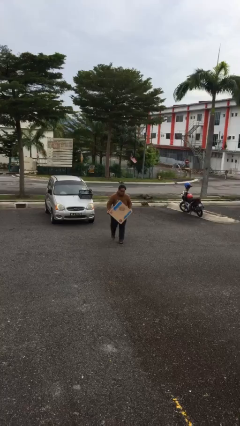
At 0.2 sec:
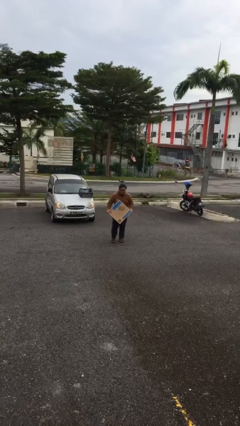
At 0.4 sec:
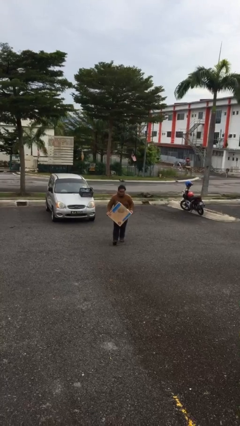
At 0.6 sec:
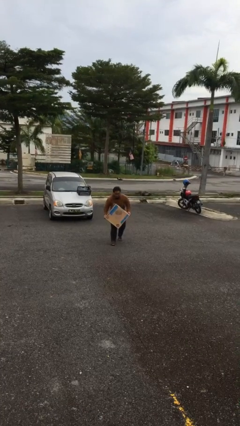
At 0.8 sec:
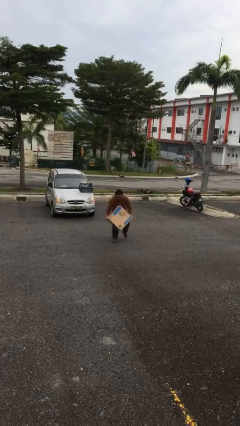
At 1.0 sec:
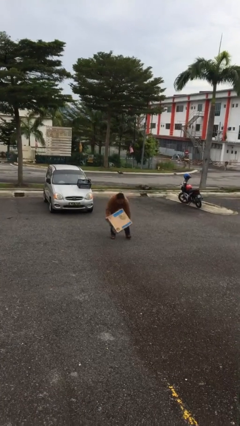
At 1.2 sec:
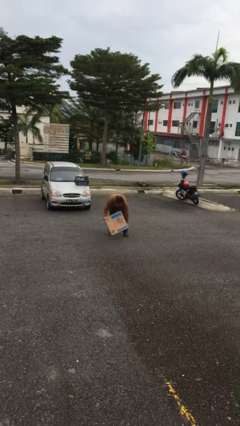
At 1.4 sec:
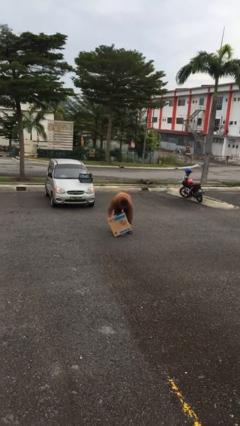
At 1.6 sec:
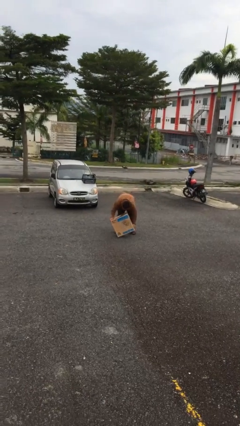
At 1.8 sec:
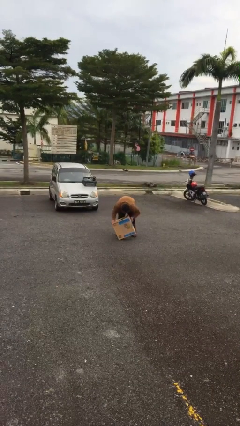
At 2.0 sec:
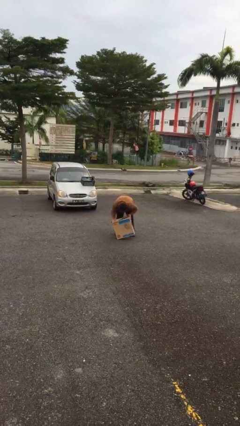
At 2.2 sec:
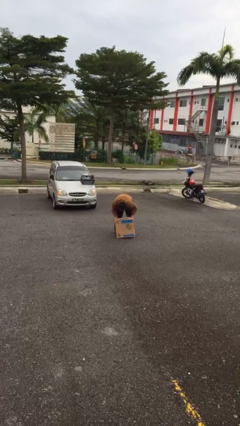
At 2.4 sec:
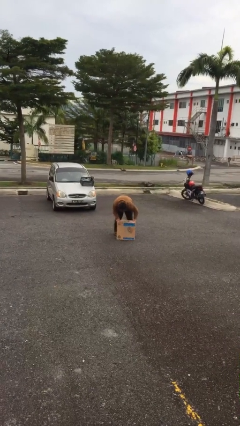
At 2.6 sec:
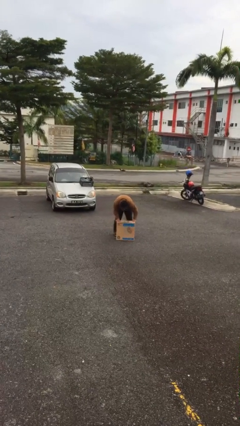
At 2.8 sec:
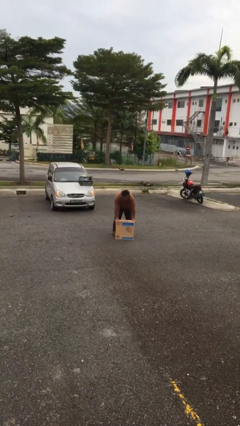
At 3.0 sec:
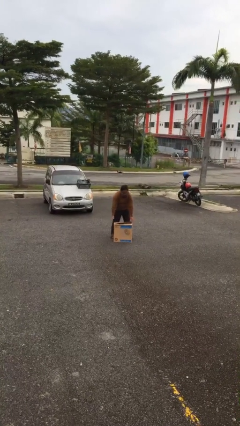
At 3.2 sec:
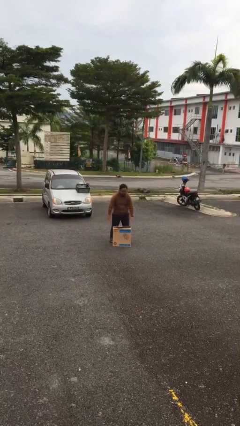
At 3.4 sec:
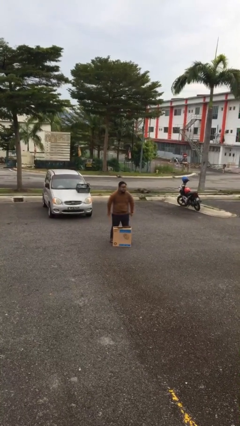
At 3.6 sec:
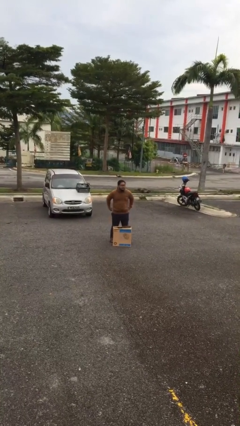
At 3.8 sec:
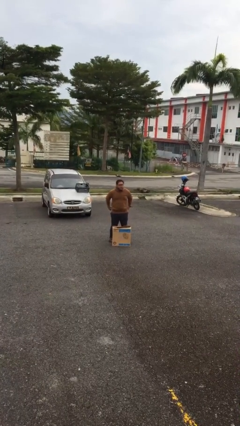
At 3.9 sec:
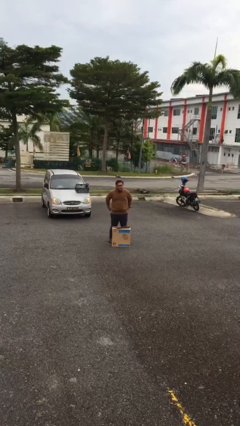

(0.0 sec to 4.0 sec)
person puts down object on floor

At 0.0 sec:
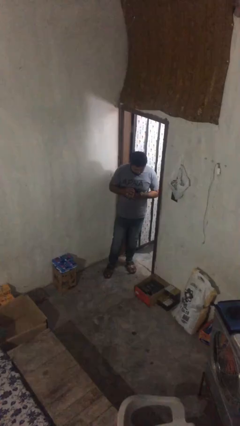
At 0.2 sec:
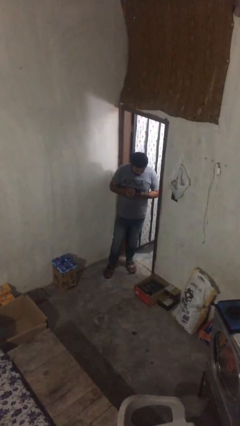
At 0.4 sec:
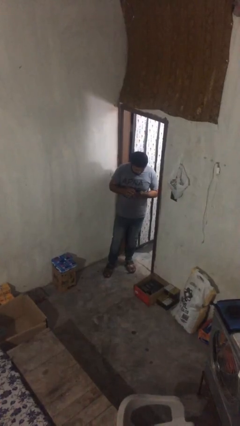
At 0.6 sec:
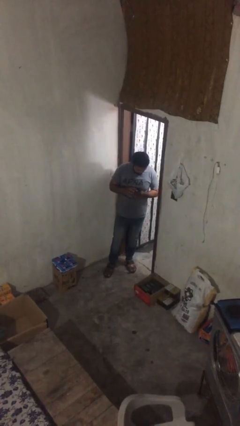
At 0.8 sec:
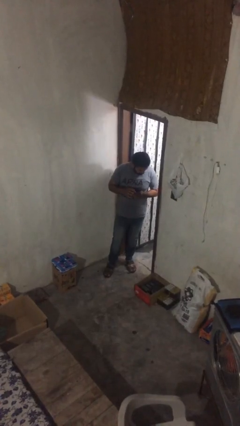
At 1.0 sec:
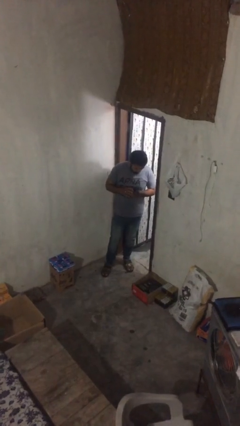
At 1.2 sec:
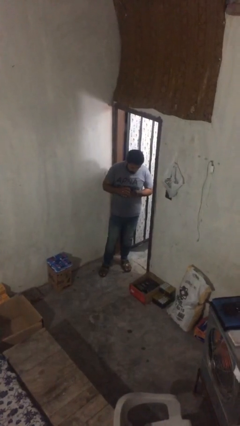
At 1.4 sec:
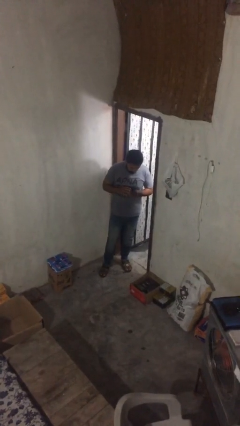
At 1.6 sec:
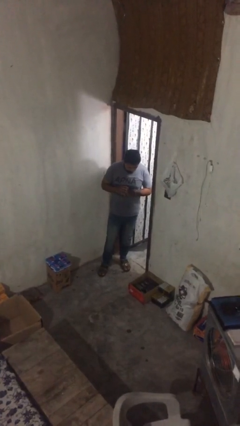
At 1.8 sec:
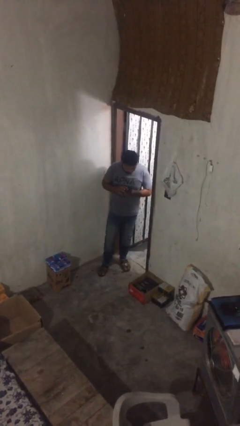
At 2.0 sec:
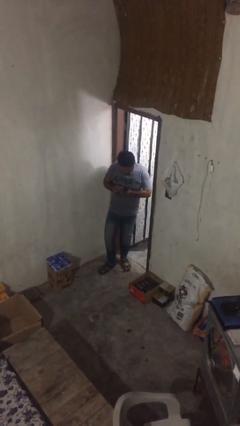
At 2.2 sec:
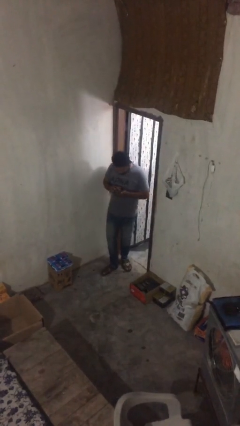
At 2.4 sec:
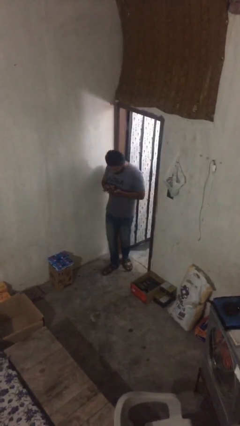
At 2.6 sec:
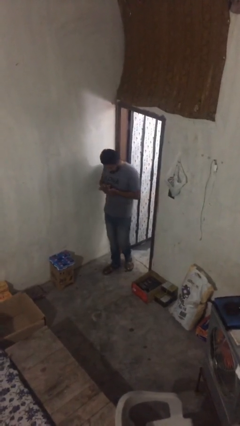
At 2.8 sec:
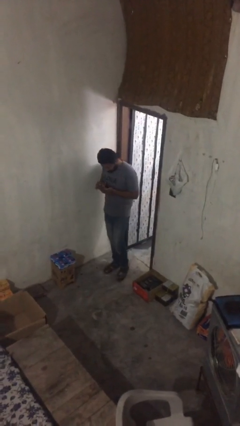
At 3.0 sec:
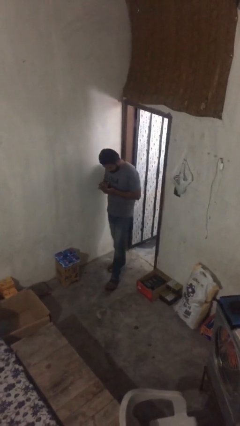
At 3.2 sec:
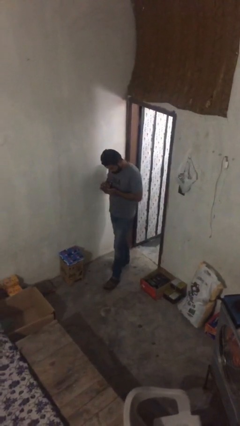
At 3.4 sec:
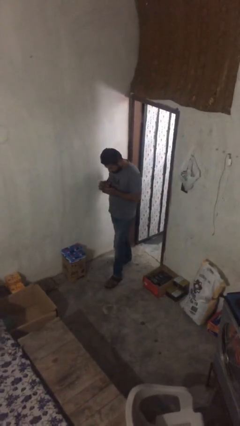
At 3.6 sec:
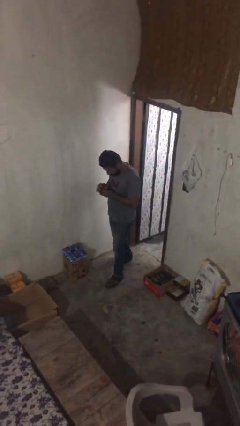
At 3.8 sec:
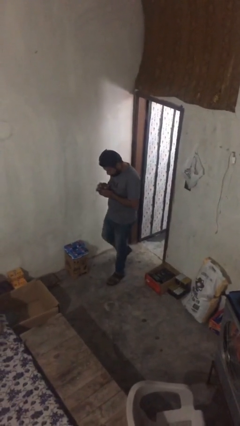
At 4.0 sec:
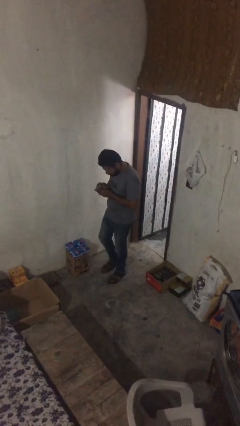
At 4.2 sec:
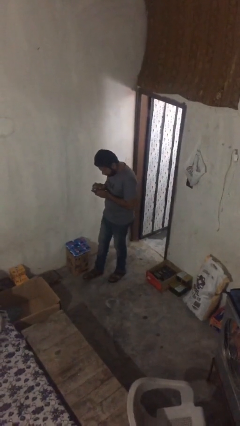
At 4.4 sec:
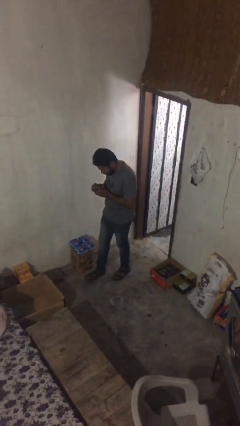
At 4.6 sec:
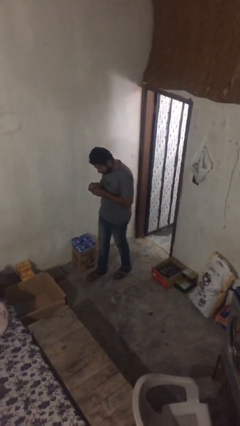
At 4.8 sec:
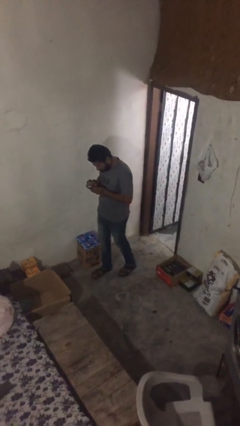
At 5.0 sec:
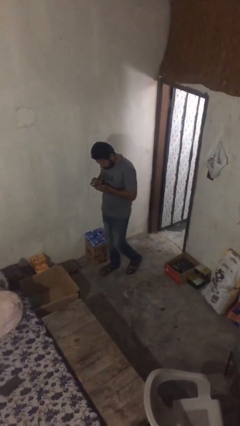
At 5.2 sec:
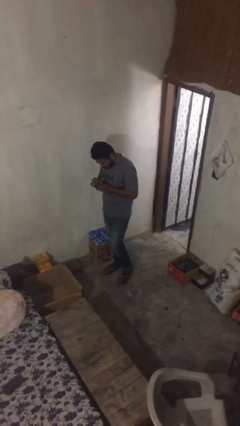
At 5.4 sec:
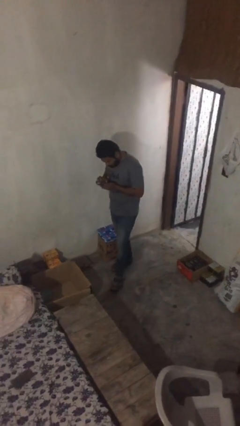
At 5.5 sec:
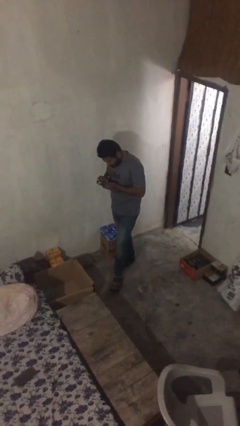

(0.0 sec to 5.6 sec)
person texts on phone

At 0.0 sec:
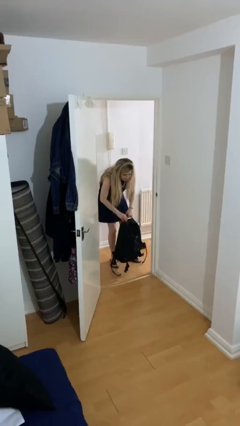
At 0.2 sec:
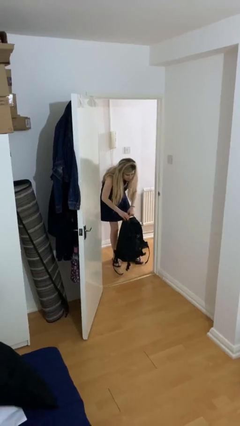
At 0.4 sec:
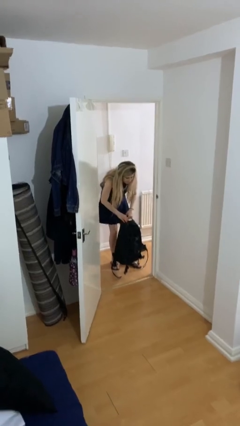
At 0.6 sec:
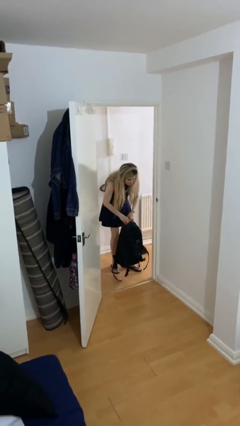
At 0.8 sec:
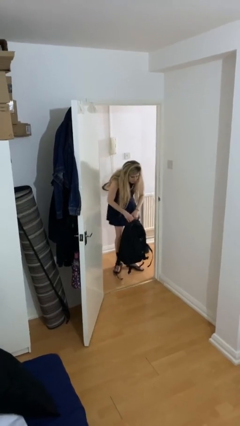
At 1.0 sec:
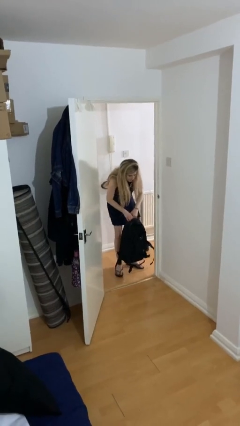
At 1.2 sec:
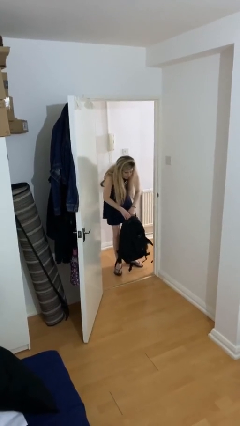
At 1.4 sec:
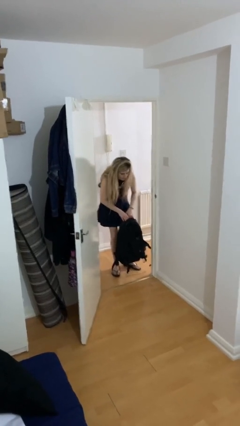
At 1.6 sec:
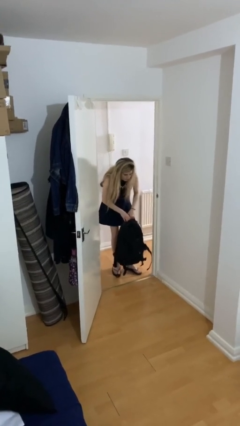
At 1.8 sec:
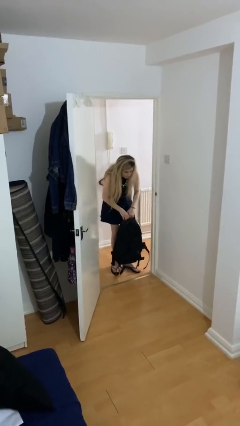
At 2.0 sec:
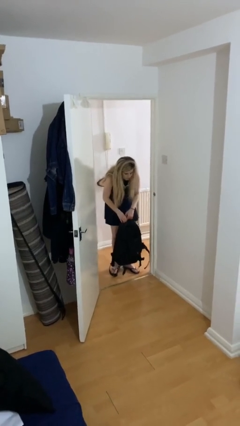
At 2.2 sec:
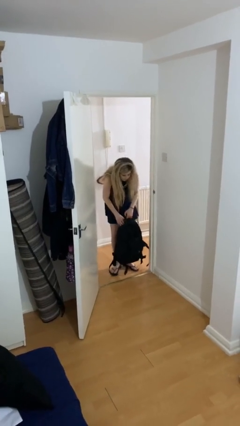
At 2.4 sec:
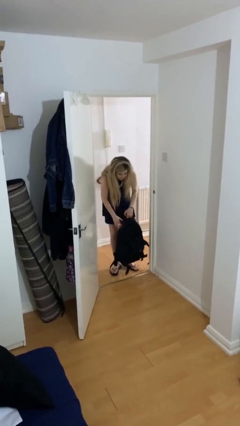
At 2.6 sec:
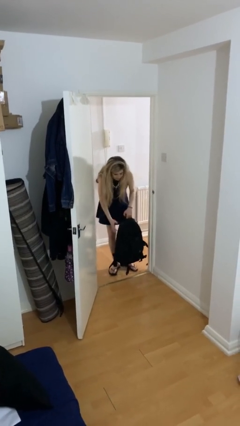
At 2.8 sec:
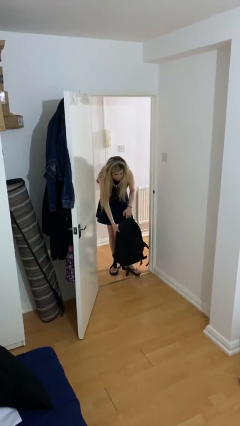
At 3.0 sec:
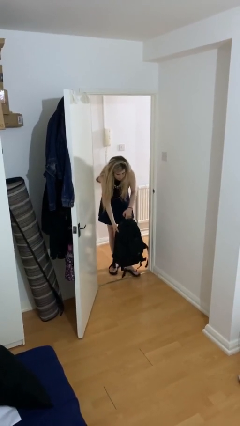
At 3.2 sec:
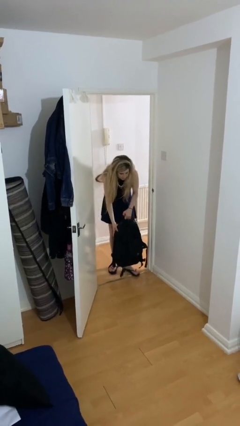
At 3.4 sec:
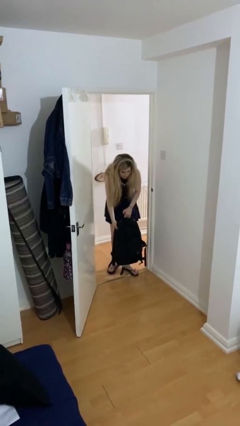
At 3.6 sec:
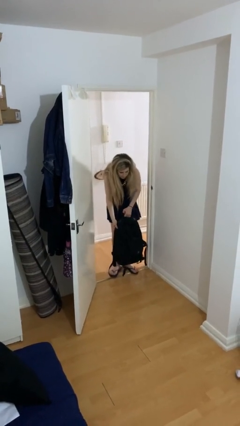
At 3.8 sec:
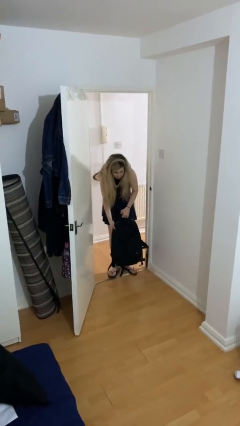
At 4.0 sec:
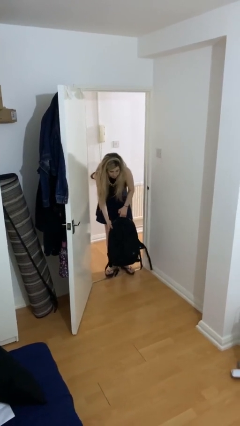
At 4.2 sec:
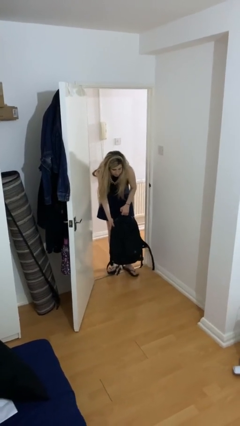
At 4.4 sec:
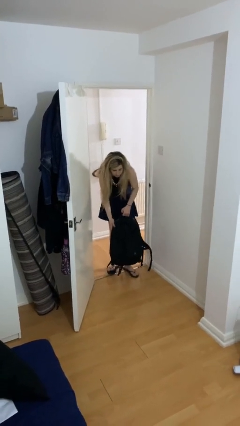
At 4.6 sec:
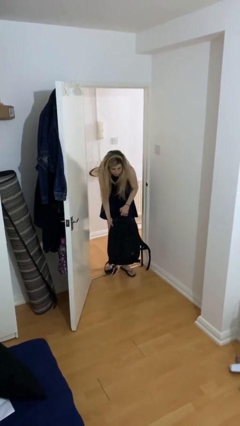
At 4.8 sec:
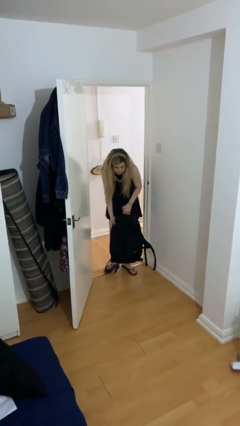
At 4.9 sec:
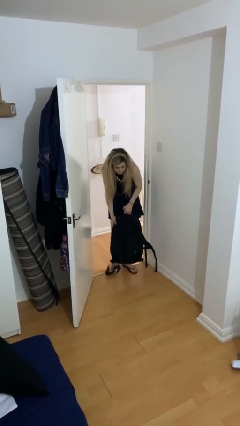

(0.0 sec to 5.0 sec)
person carries heavy object

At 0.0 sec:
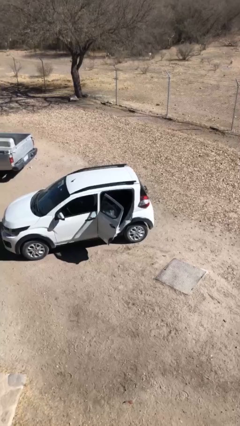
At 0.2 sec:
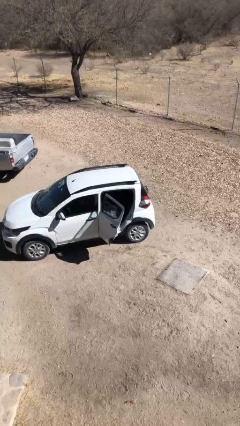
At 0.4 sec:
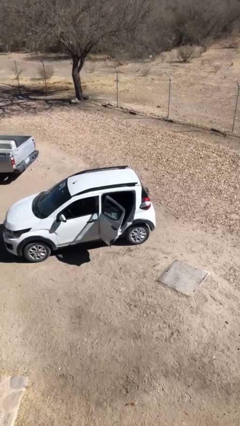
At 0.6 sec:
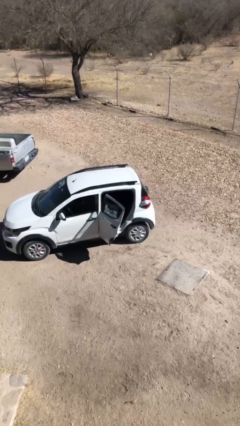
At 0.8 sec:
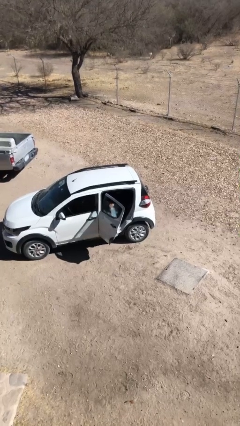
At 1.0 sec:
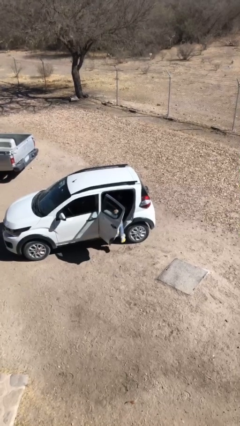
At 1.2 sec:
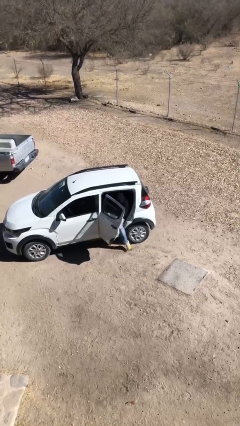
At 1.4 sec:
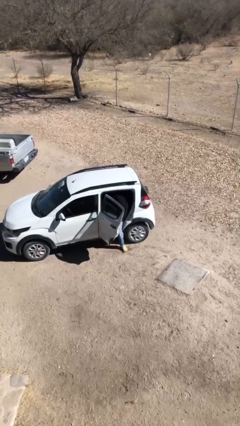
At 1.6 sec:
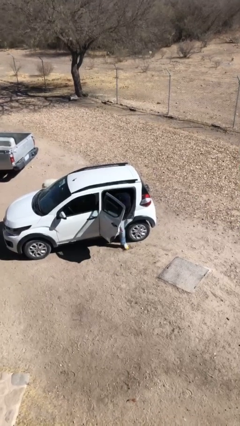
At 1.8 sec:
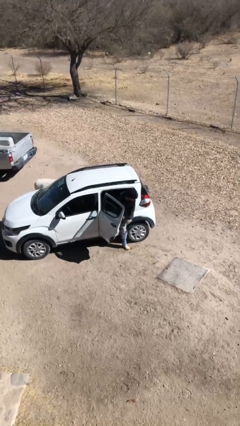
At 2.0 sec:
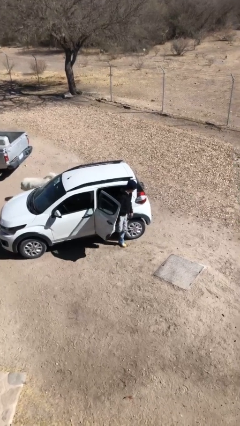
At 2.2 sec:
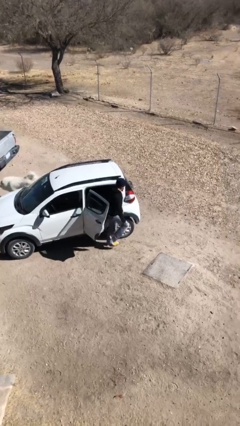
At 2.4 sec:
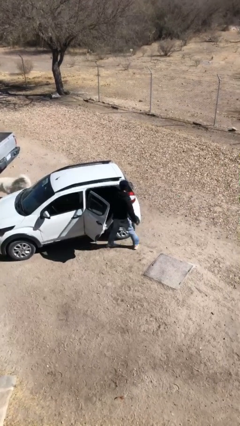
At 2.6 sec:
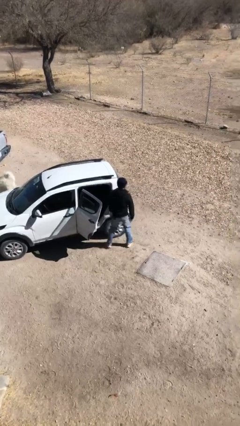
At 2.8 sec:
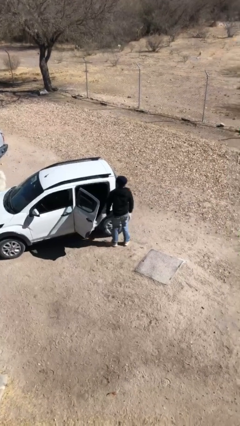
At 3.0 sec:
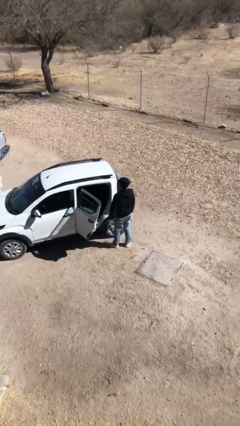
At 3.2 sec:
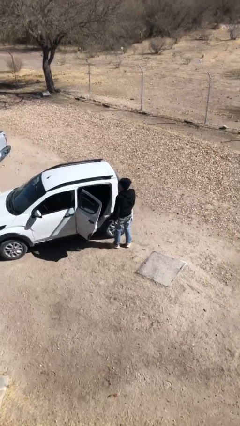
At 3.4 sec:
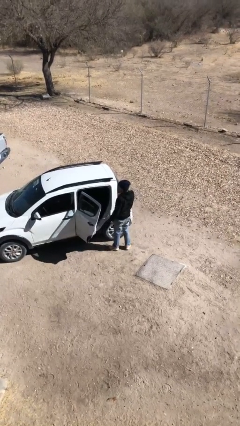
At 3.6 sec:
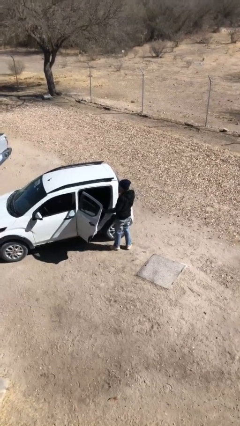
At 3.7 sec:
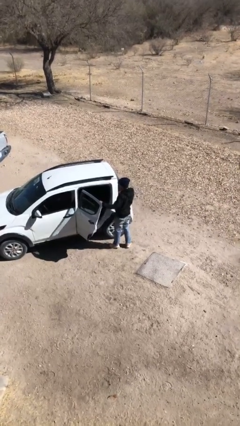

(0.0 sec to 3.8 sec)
person exits car
